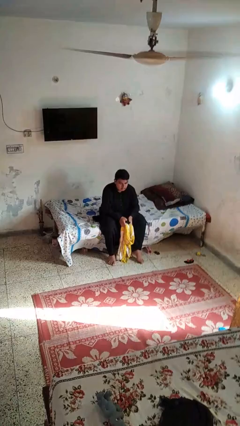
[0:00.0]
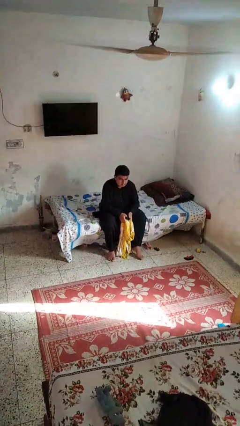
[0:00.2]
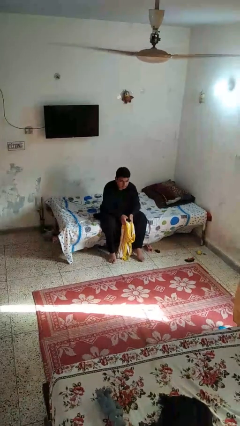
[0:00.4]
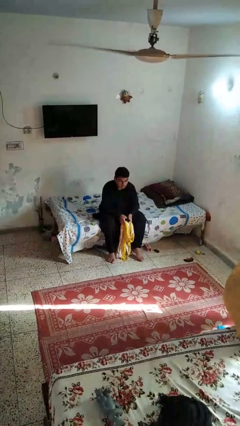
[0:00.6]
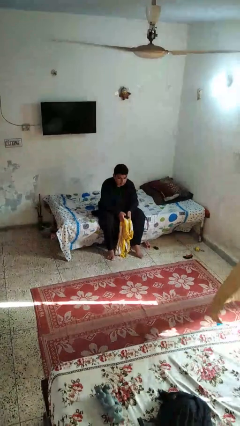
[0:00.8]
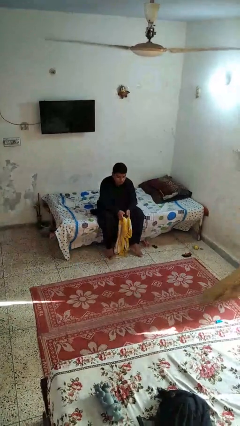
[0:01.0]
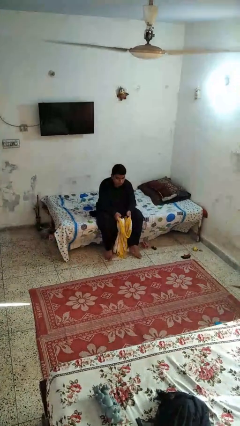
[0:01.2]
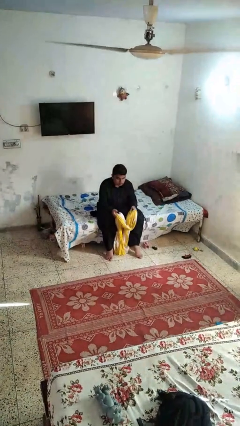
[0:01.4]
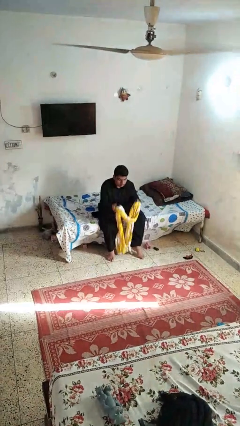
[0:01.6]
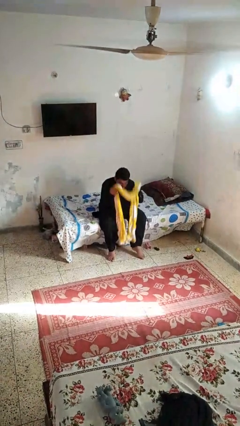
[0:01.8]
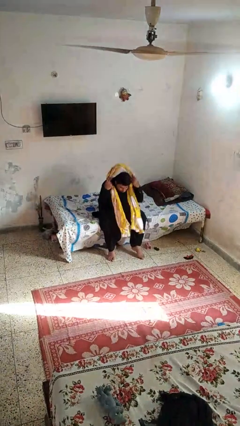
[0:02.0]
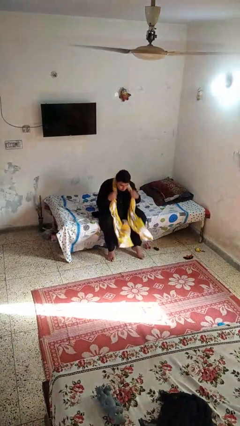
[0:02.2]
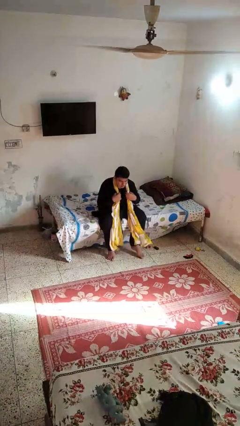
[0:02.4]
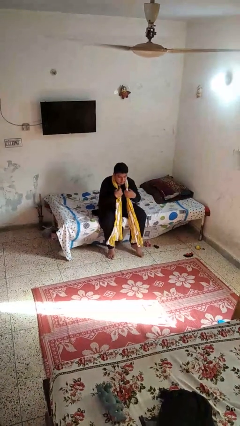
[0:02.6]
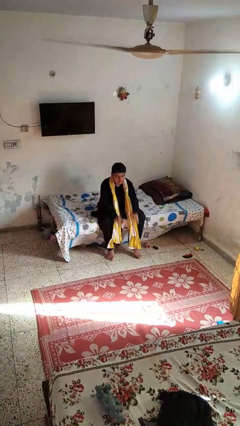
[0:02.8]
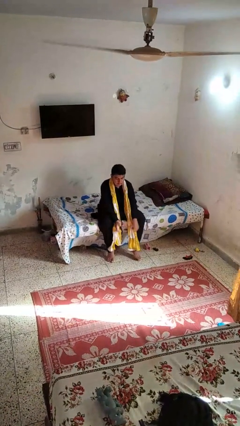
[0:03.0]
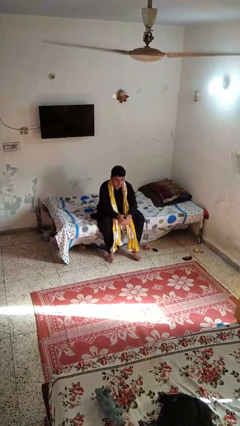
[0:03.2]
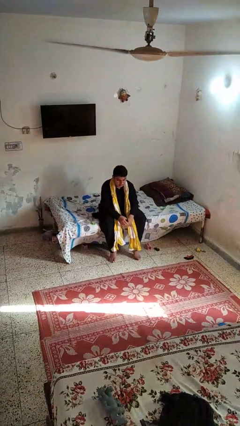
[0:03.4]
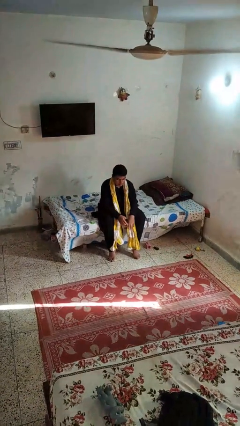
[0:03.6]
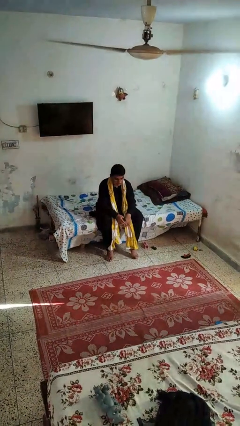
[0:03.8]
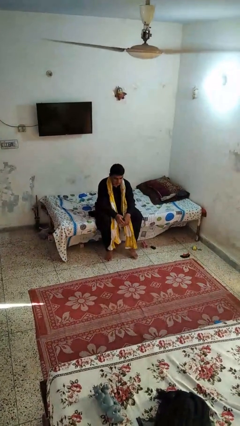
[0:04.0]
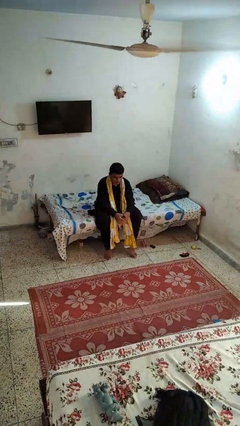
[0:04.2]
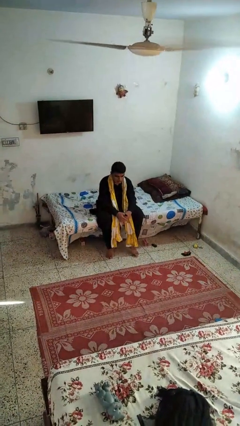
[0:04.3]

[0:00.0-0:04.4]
person puts on scarf

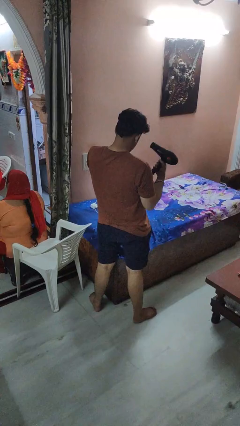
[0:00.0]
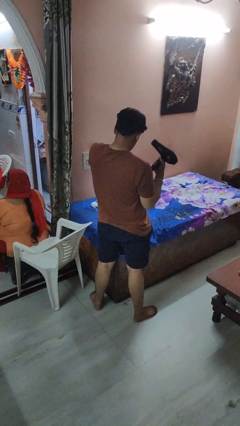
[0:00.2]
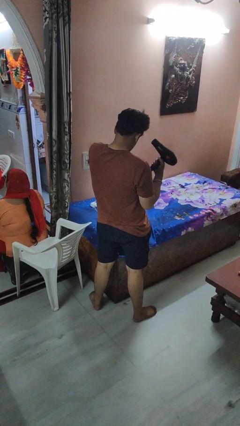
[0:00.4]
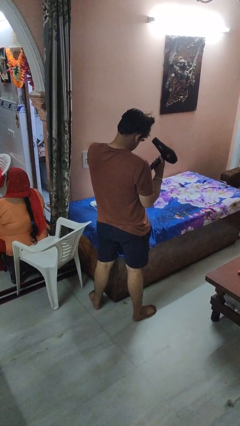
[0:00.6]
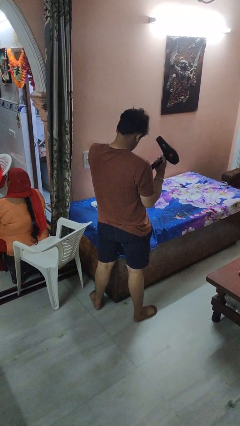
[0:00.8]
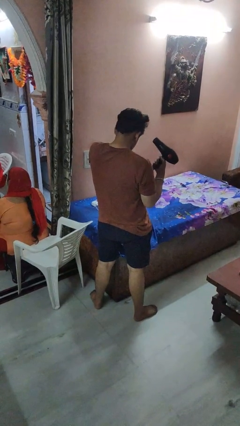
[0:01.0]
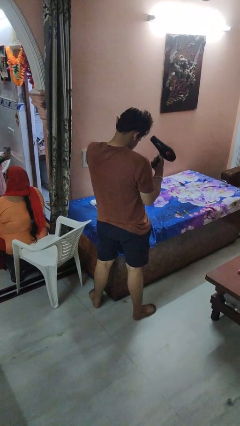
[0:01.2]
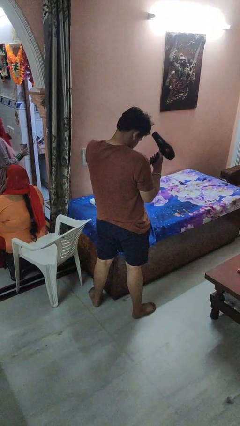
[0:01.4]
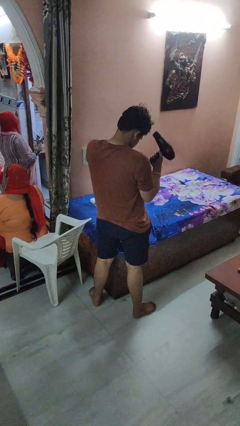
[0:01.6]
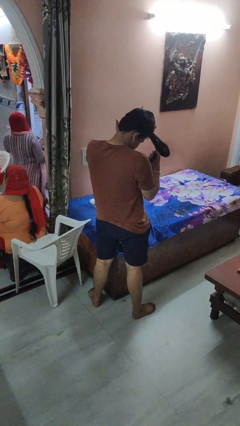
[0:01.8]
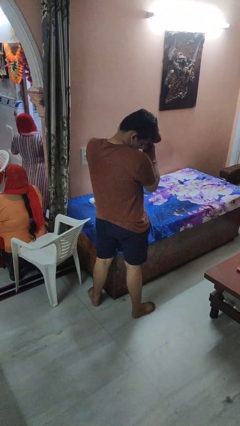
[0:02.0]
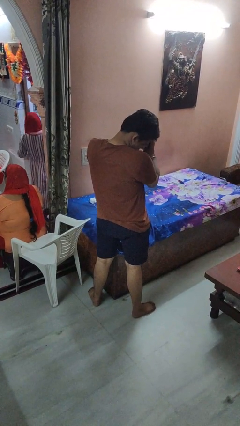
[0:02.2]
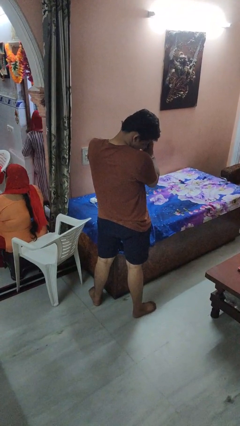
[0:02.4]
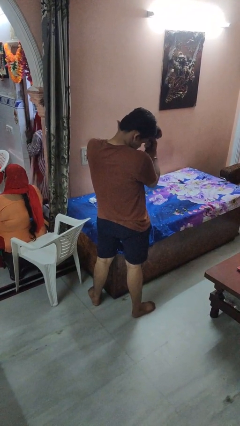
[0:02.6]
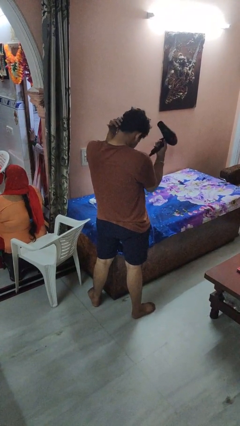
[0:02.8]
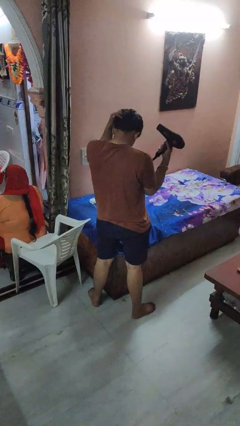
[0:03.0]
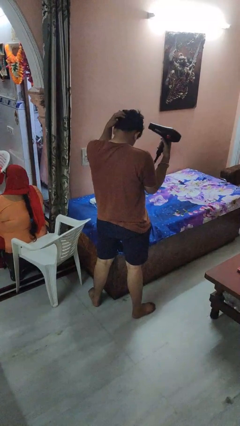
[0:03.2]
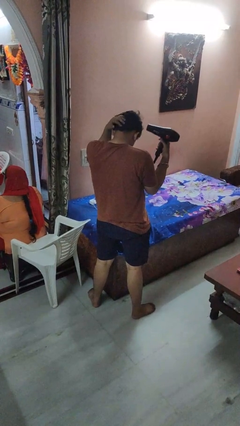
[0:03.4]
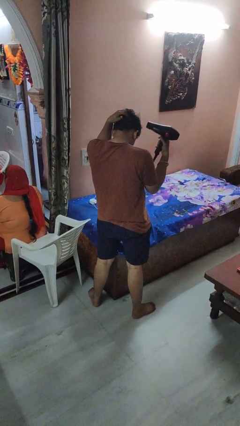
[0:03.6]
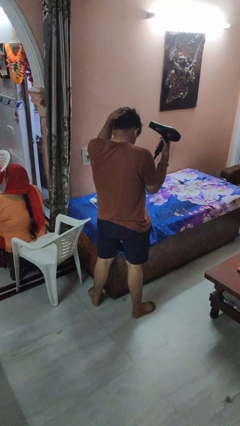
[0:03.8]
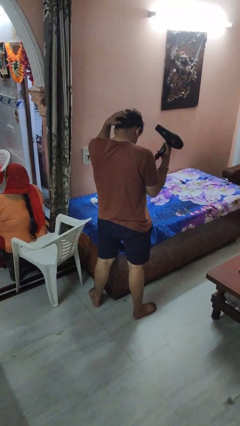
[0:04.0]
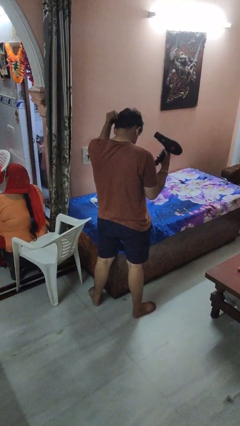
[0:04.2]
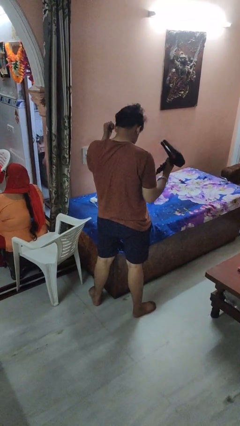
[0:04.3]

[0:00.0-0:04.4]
person dries hair with hairdryer

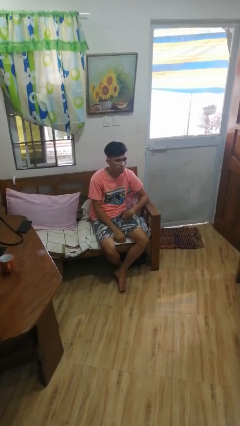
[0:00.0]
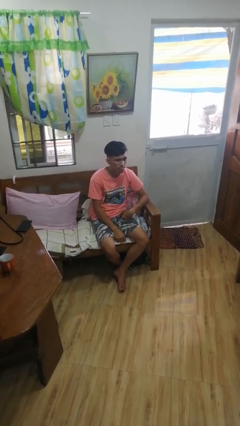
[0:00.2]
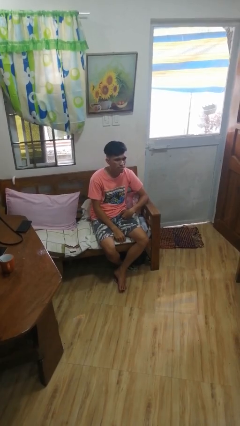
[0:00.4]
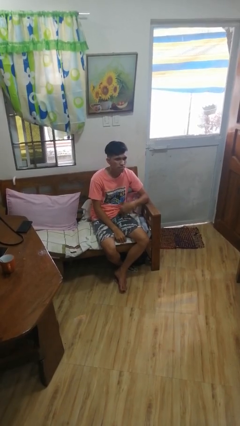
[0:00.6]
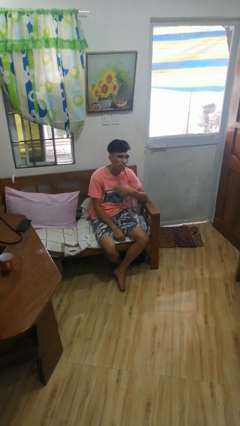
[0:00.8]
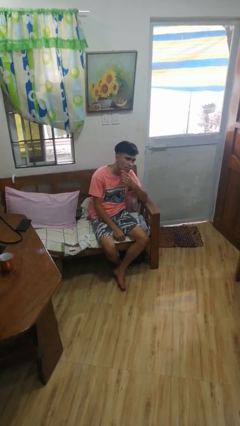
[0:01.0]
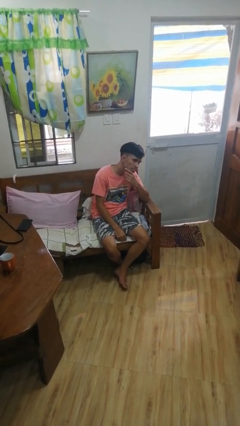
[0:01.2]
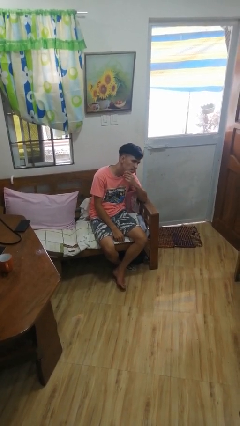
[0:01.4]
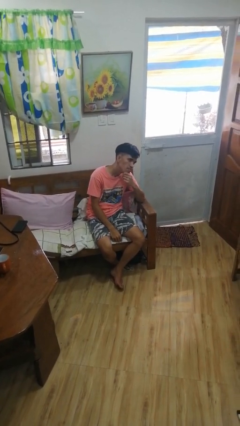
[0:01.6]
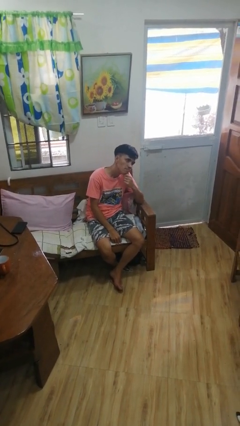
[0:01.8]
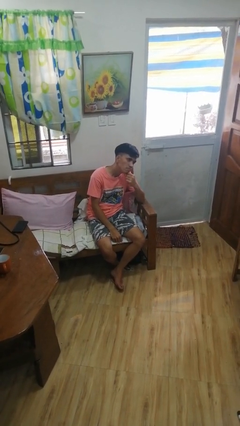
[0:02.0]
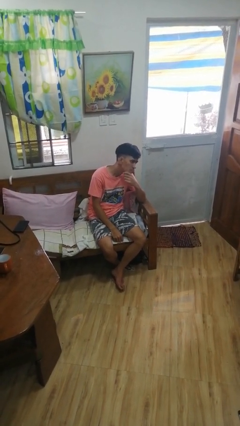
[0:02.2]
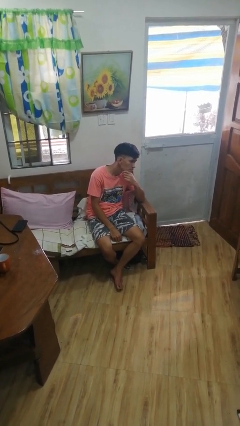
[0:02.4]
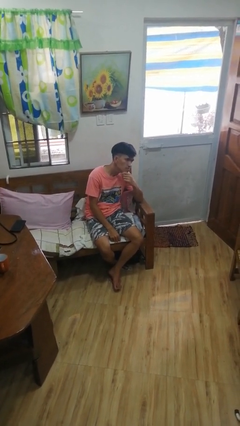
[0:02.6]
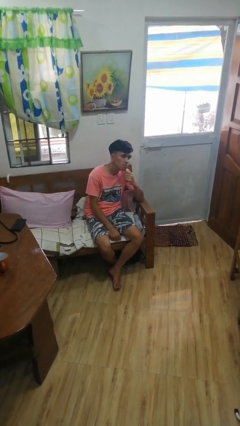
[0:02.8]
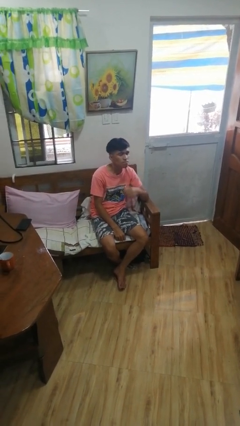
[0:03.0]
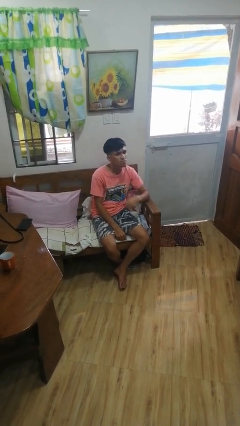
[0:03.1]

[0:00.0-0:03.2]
person strokes chin

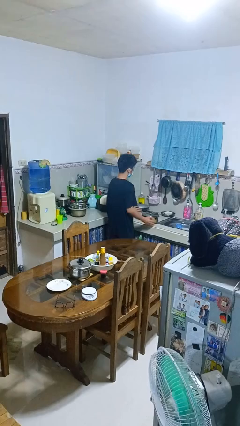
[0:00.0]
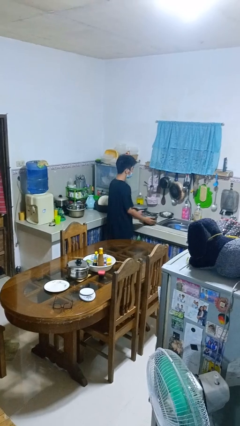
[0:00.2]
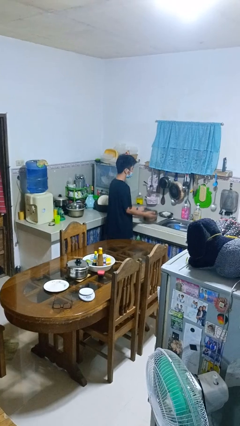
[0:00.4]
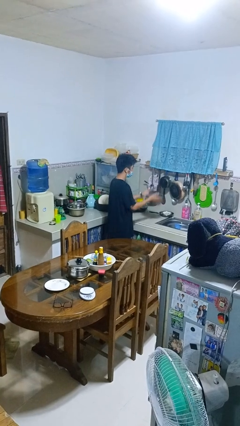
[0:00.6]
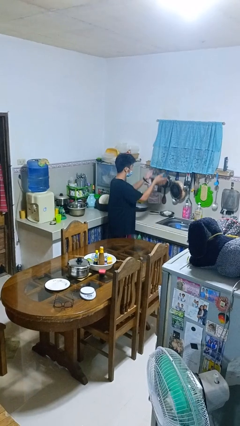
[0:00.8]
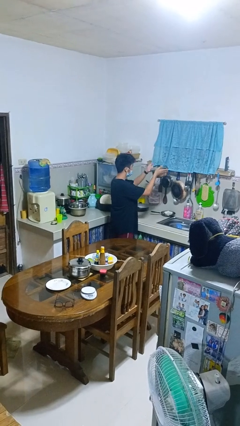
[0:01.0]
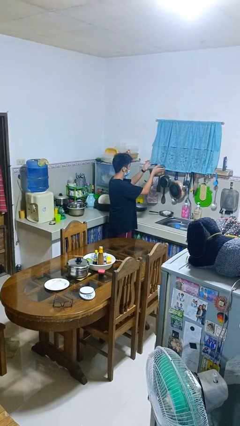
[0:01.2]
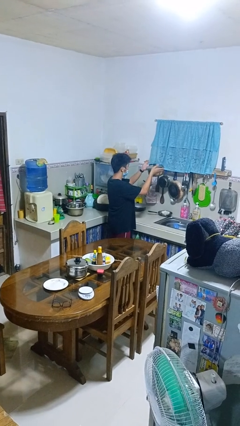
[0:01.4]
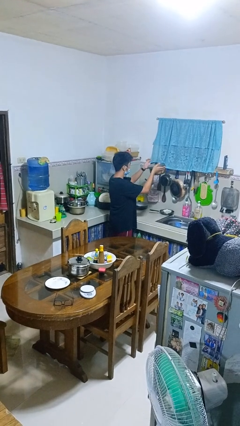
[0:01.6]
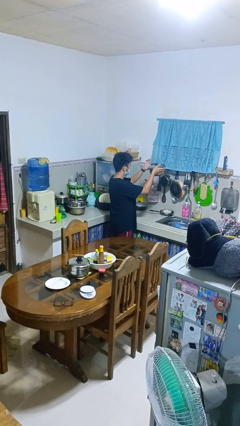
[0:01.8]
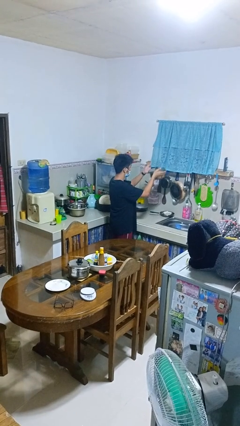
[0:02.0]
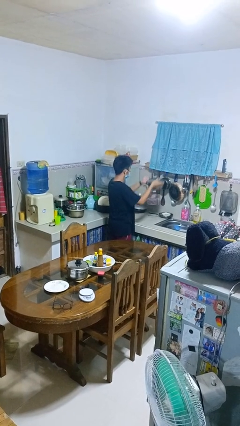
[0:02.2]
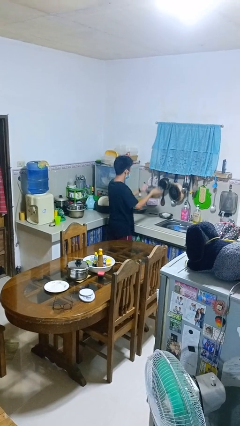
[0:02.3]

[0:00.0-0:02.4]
person picks up object from countertop

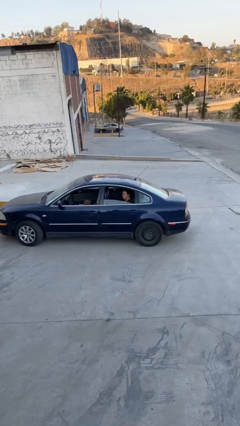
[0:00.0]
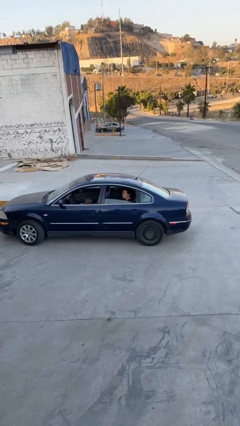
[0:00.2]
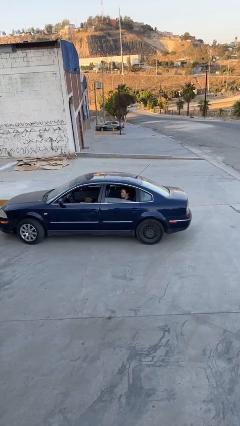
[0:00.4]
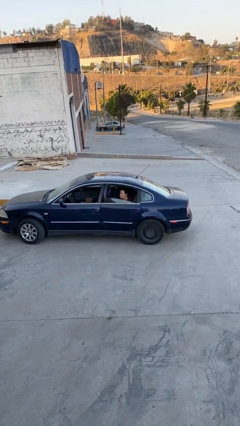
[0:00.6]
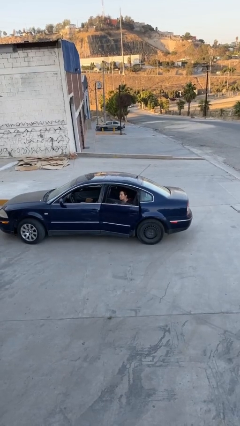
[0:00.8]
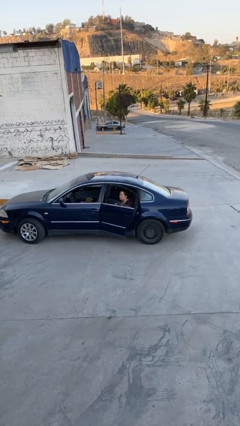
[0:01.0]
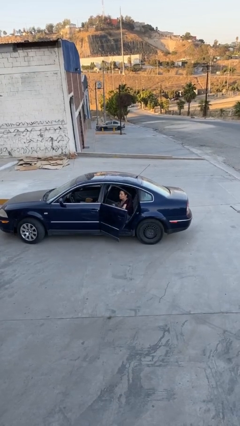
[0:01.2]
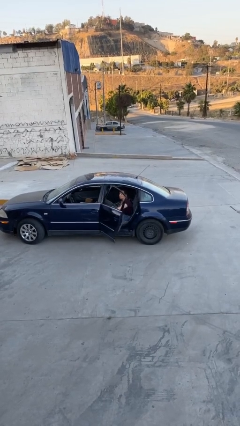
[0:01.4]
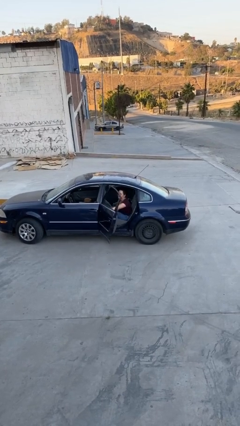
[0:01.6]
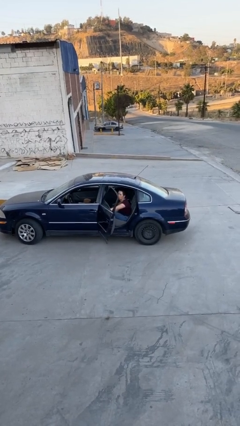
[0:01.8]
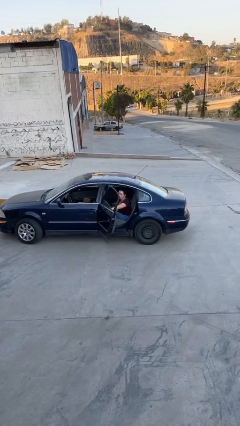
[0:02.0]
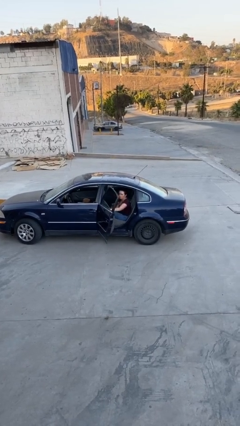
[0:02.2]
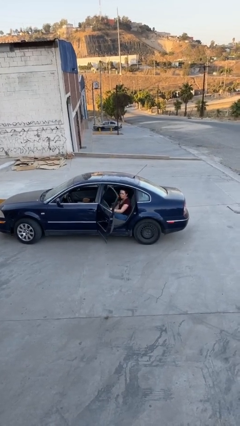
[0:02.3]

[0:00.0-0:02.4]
person opens car door

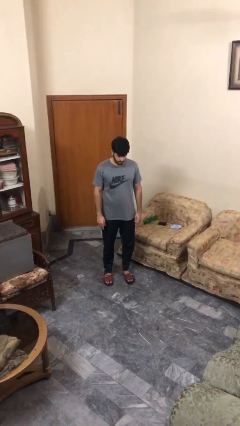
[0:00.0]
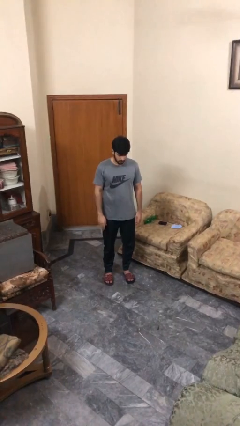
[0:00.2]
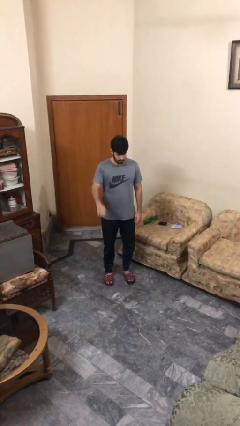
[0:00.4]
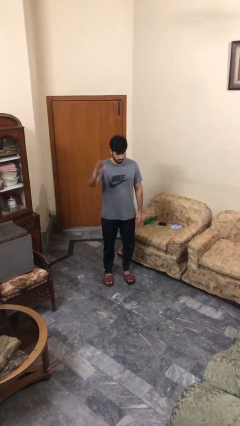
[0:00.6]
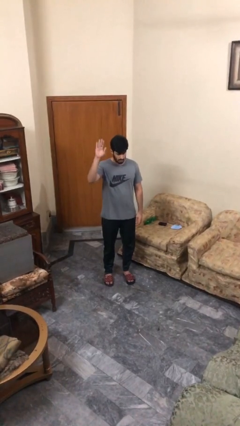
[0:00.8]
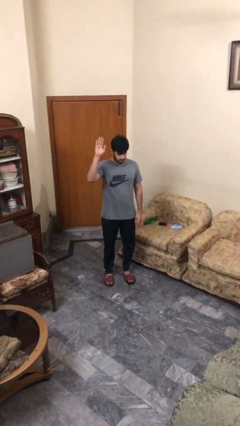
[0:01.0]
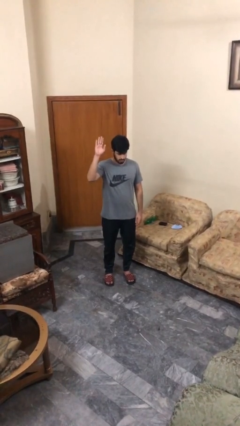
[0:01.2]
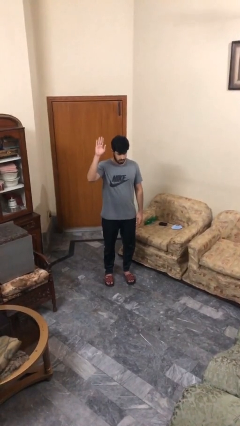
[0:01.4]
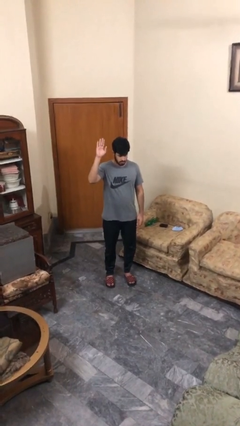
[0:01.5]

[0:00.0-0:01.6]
person gestures raise hand
